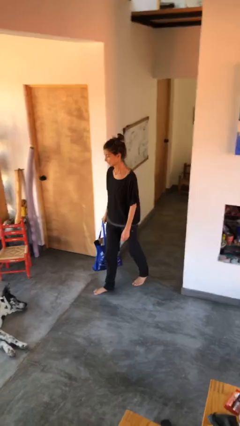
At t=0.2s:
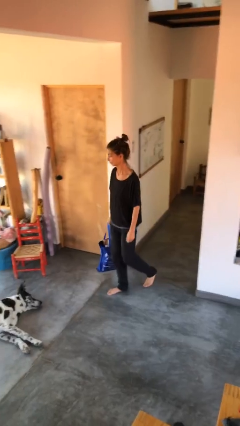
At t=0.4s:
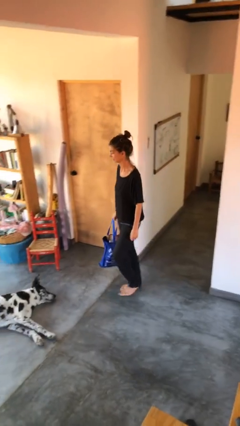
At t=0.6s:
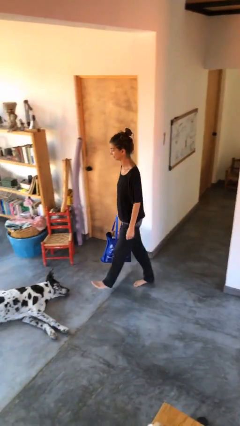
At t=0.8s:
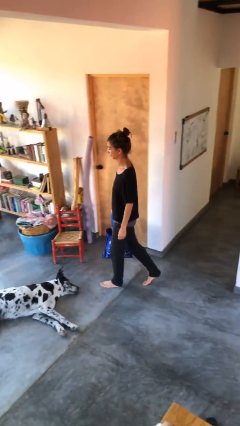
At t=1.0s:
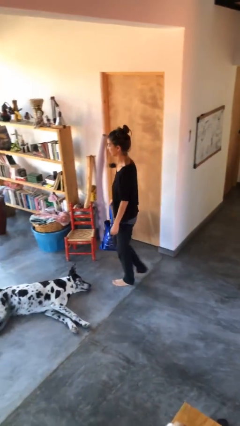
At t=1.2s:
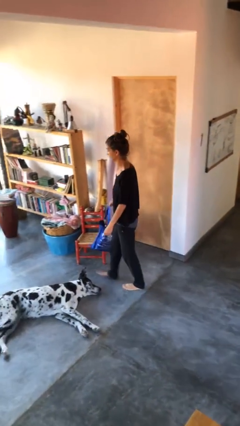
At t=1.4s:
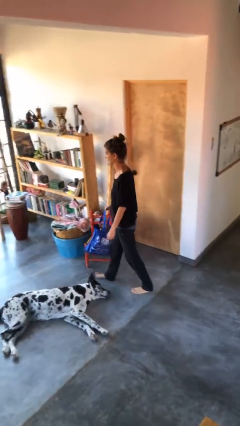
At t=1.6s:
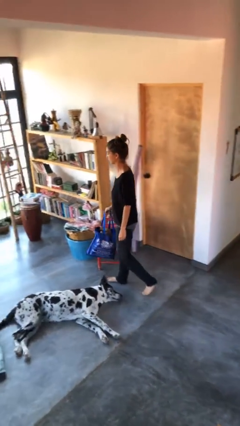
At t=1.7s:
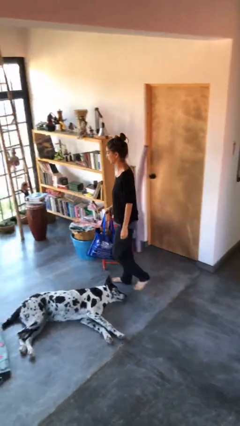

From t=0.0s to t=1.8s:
person carries groceries

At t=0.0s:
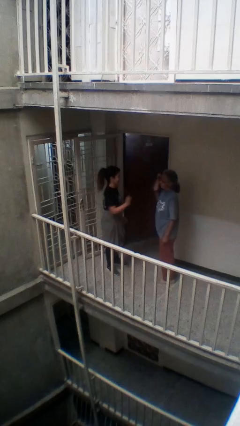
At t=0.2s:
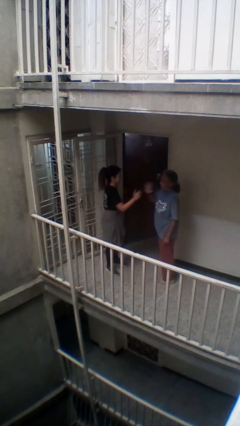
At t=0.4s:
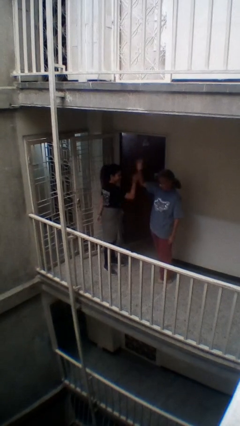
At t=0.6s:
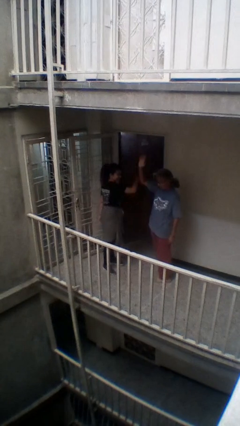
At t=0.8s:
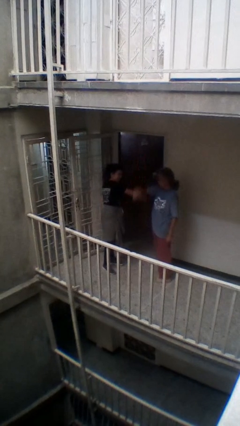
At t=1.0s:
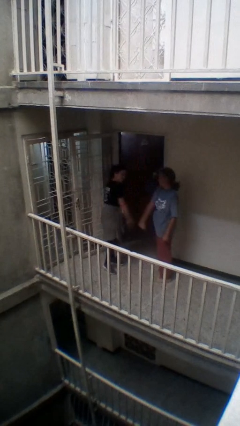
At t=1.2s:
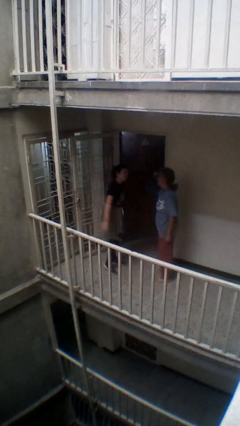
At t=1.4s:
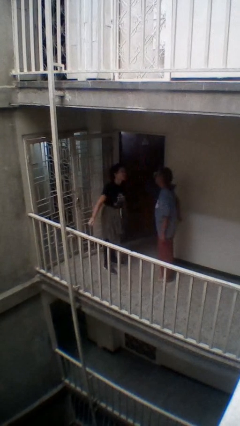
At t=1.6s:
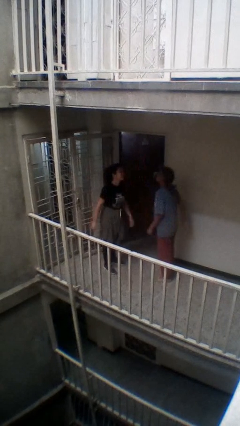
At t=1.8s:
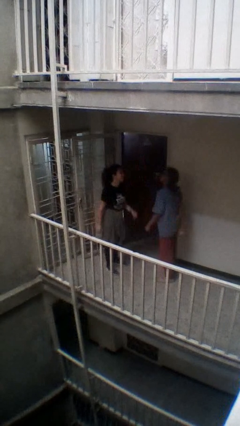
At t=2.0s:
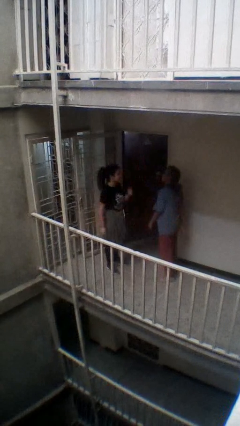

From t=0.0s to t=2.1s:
person highfives hand

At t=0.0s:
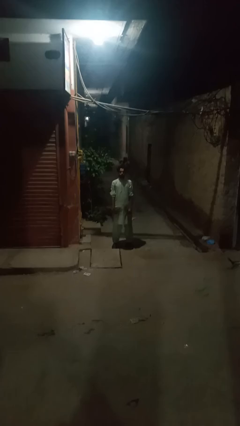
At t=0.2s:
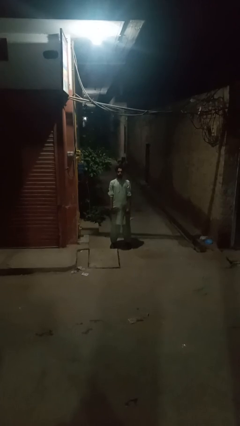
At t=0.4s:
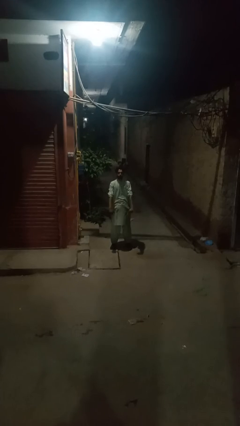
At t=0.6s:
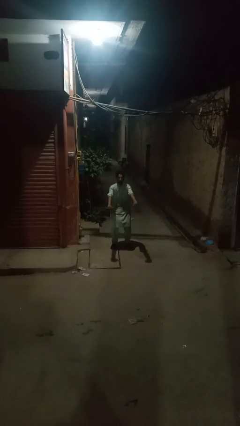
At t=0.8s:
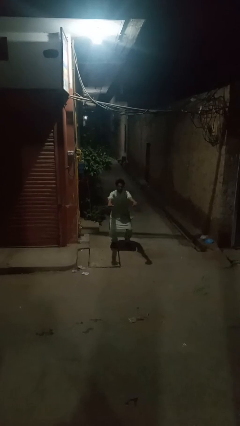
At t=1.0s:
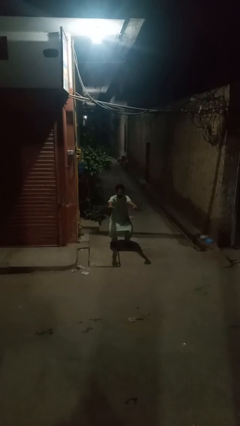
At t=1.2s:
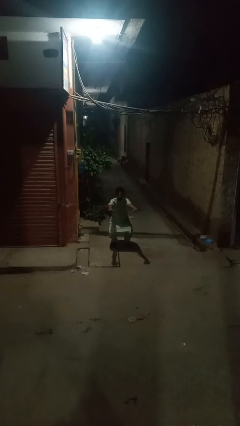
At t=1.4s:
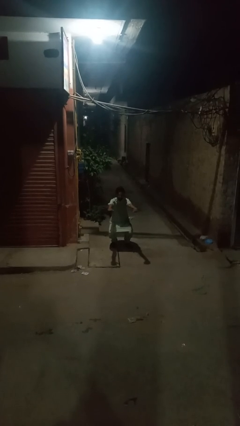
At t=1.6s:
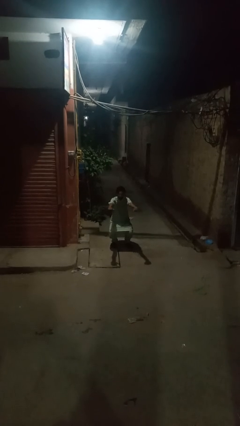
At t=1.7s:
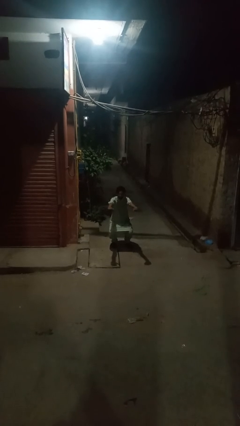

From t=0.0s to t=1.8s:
person squats

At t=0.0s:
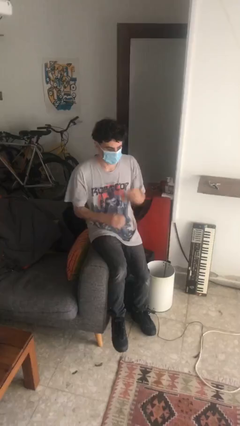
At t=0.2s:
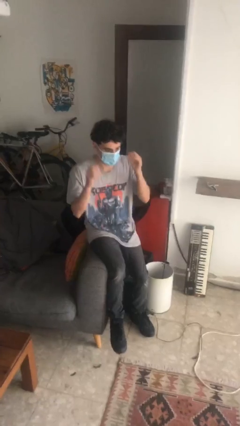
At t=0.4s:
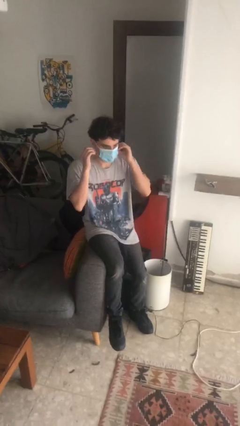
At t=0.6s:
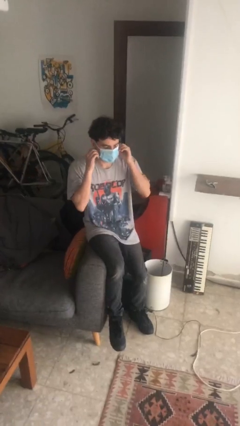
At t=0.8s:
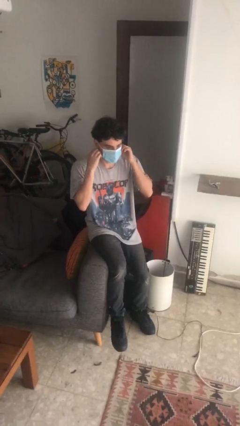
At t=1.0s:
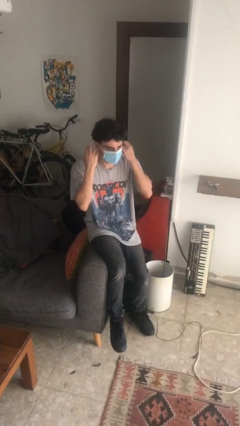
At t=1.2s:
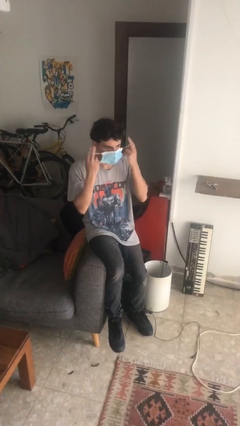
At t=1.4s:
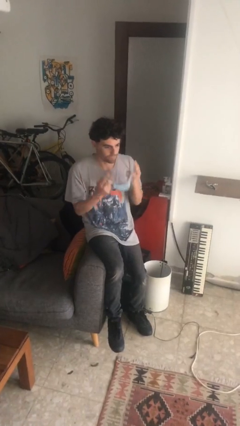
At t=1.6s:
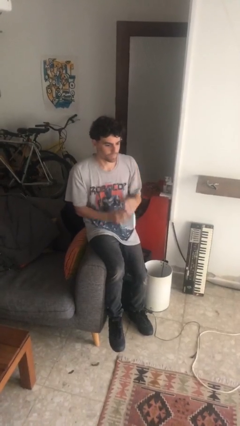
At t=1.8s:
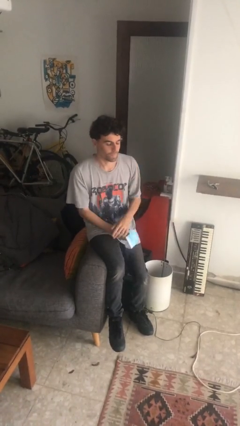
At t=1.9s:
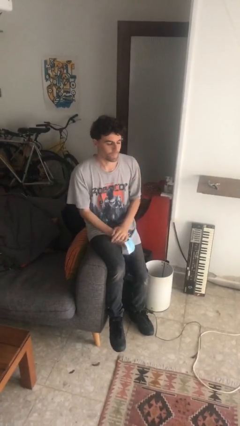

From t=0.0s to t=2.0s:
person takes off facemask

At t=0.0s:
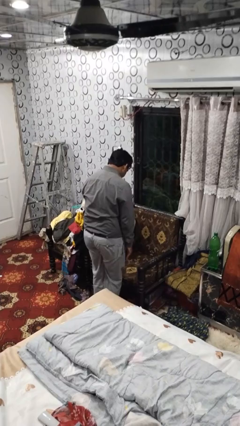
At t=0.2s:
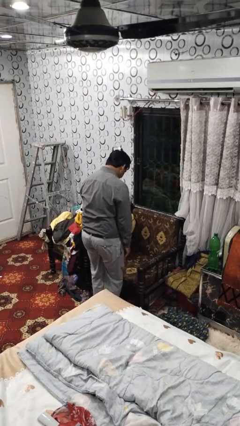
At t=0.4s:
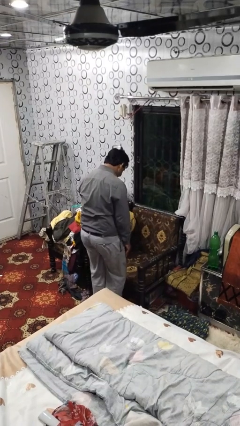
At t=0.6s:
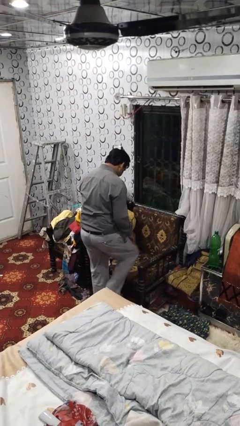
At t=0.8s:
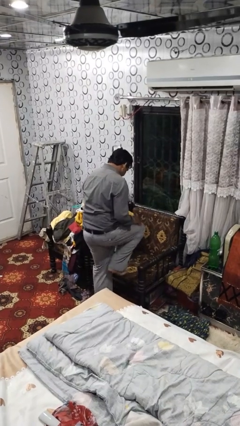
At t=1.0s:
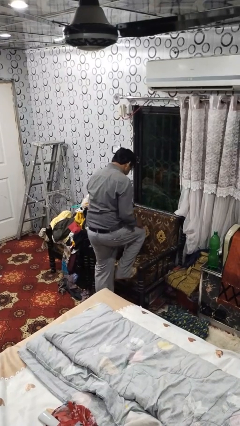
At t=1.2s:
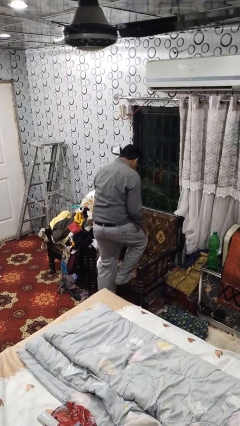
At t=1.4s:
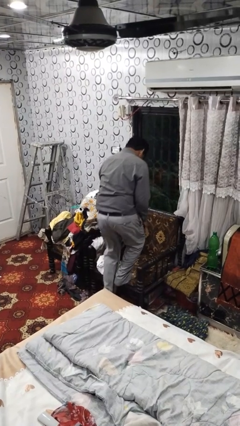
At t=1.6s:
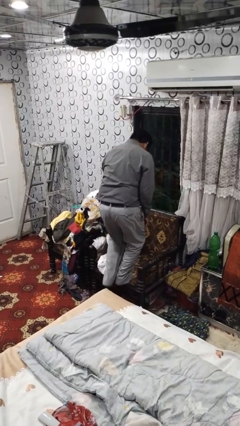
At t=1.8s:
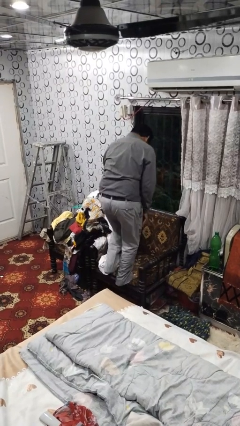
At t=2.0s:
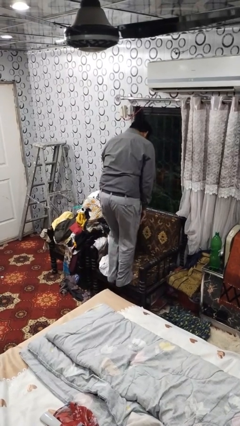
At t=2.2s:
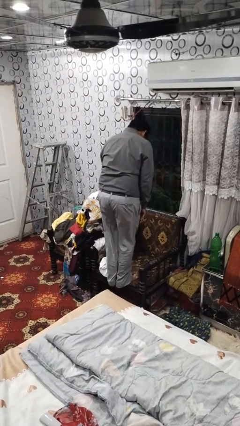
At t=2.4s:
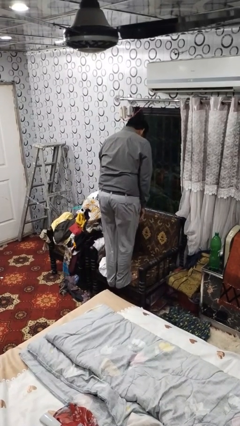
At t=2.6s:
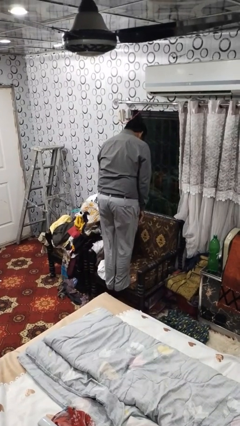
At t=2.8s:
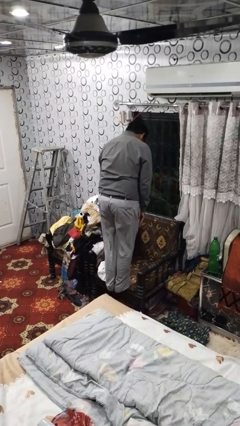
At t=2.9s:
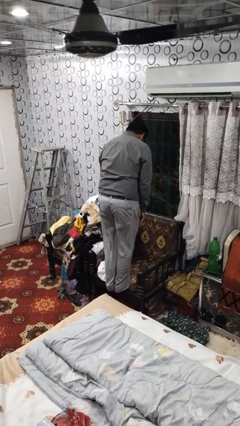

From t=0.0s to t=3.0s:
person climbs on couch

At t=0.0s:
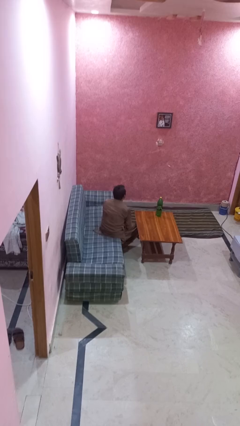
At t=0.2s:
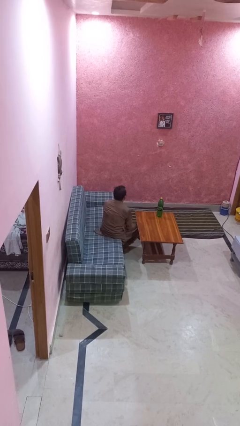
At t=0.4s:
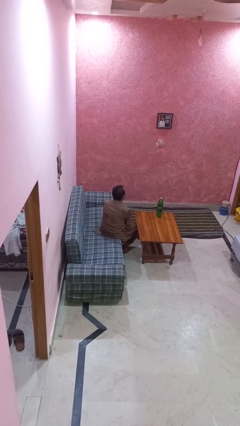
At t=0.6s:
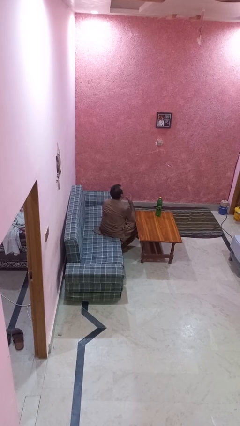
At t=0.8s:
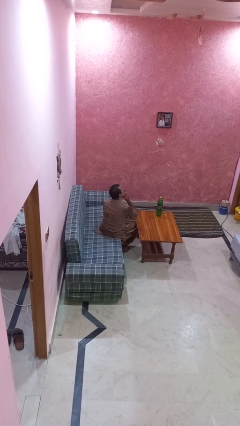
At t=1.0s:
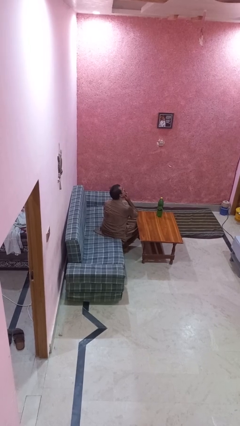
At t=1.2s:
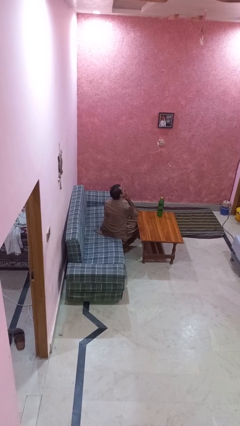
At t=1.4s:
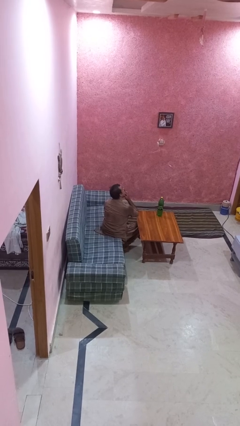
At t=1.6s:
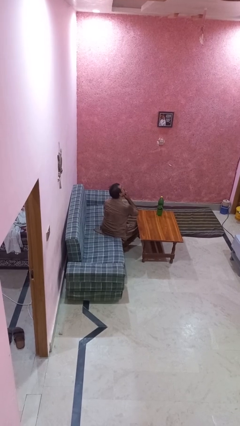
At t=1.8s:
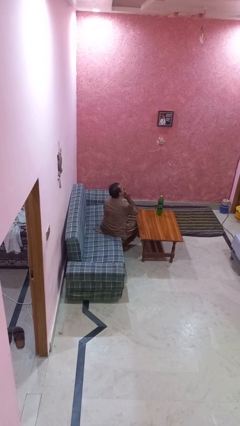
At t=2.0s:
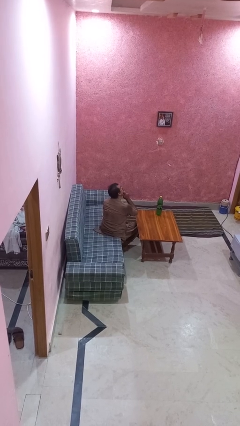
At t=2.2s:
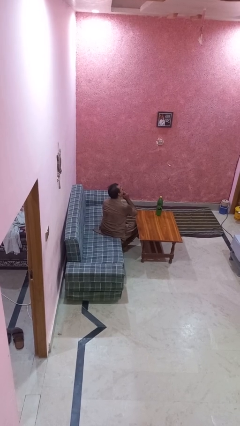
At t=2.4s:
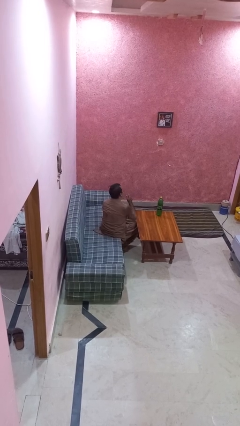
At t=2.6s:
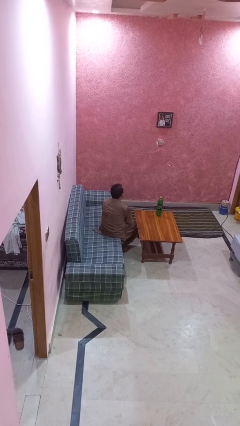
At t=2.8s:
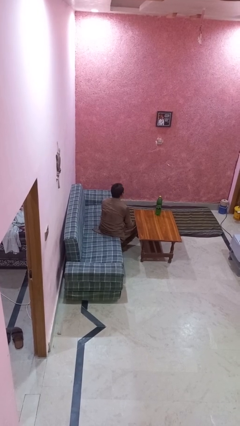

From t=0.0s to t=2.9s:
person strokes chin

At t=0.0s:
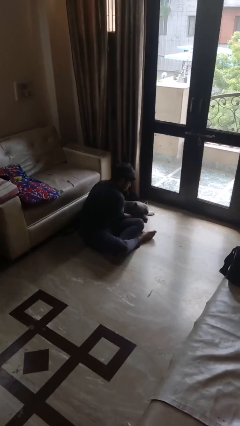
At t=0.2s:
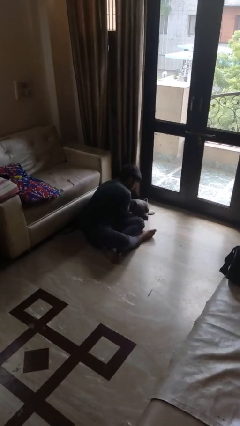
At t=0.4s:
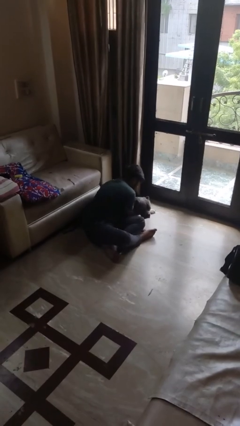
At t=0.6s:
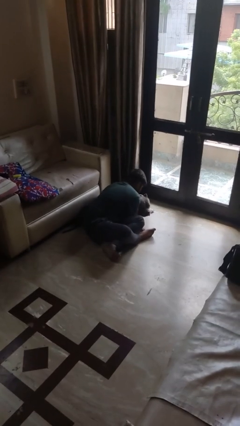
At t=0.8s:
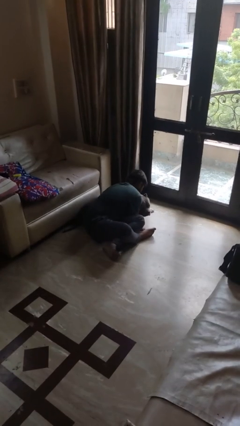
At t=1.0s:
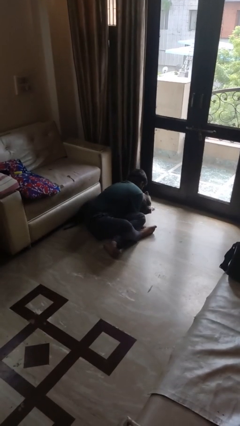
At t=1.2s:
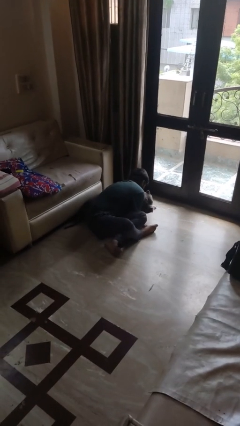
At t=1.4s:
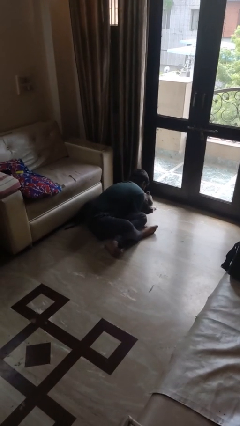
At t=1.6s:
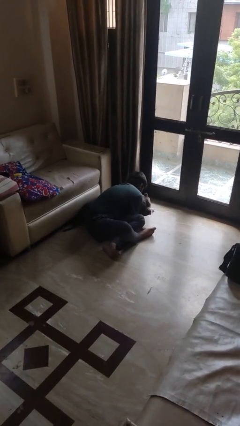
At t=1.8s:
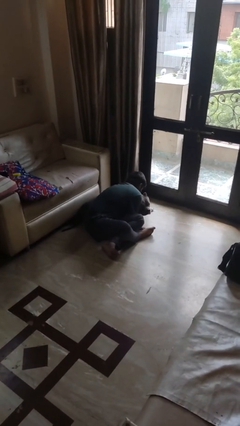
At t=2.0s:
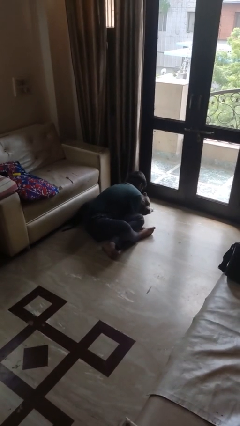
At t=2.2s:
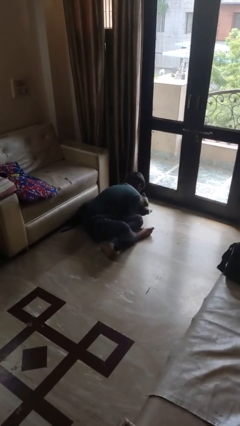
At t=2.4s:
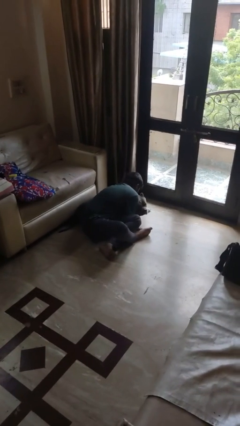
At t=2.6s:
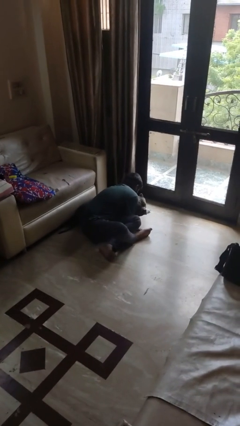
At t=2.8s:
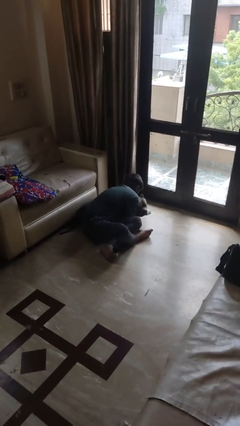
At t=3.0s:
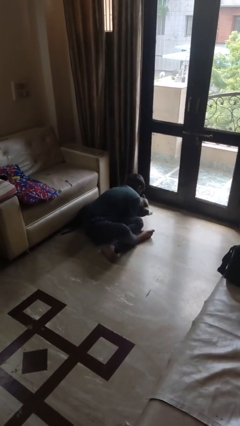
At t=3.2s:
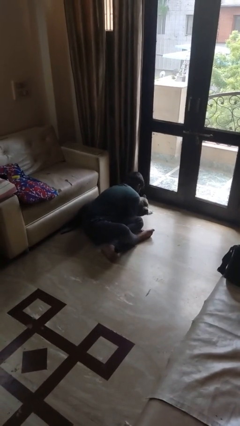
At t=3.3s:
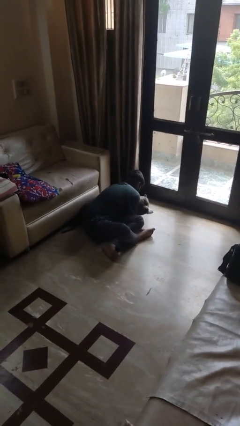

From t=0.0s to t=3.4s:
person hugs dog

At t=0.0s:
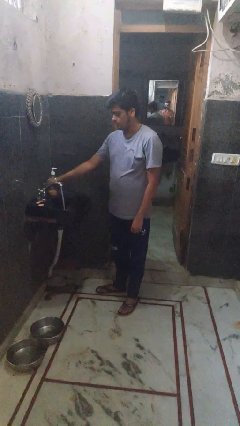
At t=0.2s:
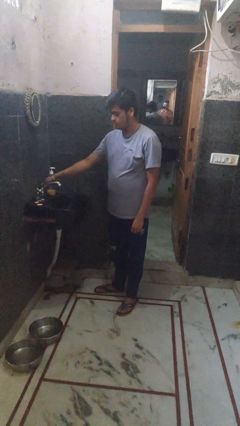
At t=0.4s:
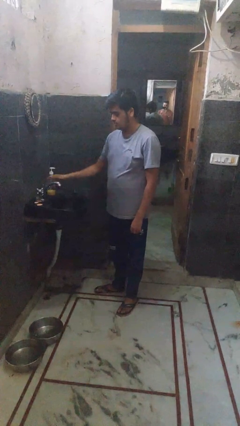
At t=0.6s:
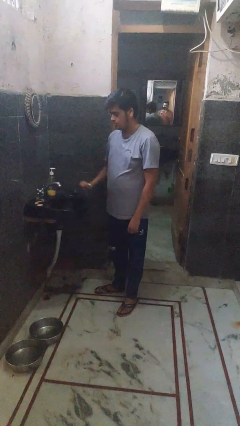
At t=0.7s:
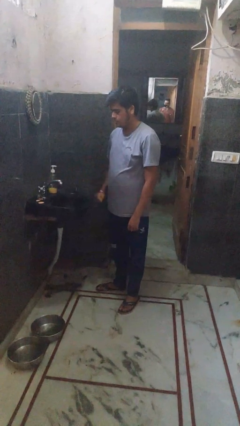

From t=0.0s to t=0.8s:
person turns off faucet
